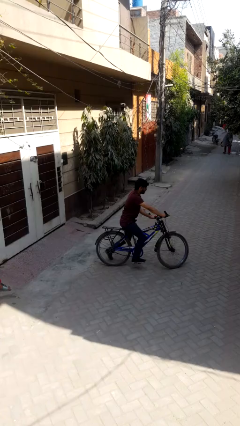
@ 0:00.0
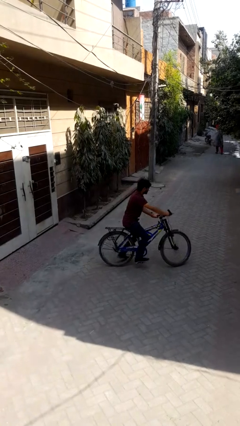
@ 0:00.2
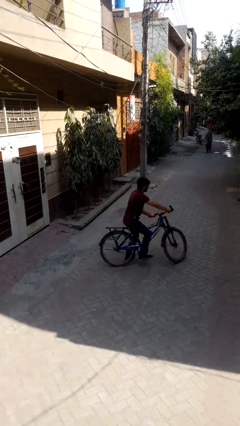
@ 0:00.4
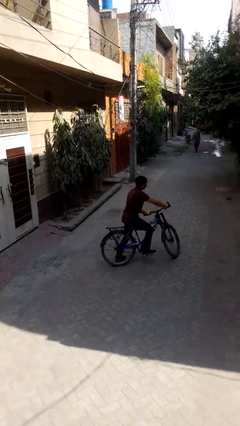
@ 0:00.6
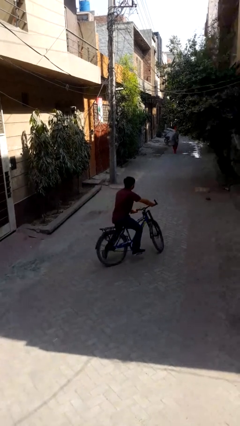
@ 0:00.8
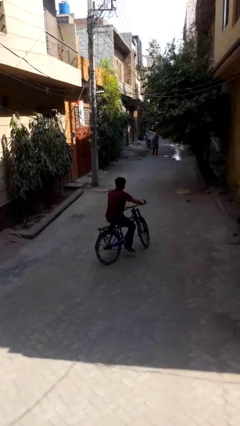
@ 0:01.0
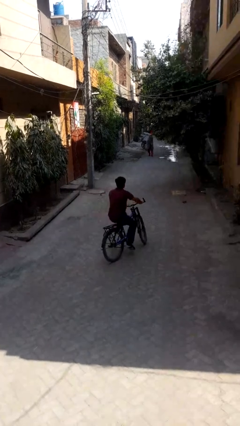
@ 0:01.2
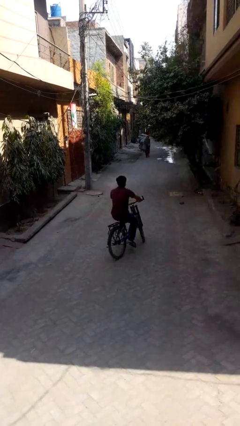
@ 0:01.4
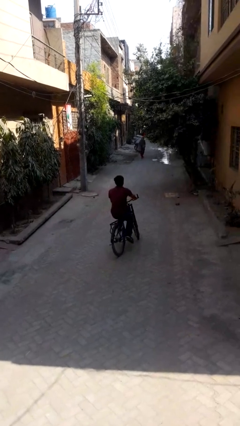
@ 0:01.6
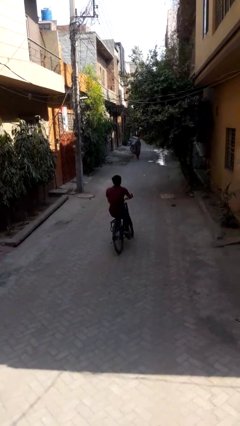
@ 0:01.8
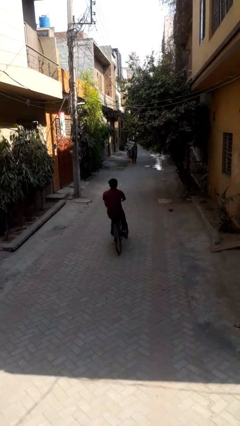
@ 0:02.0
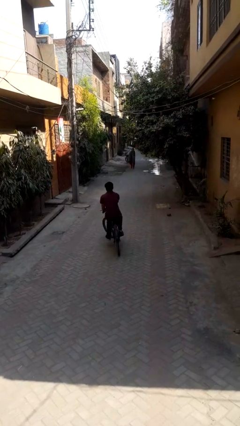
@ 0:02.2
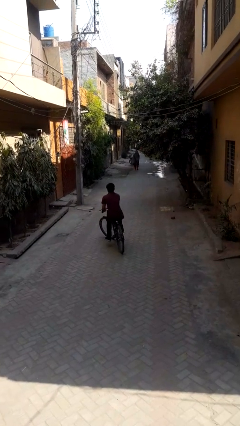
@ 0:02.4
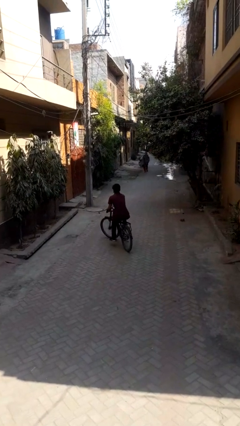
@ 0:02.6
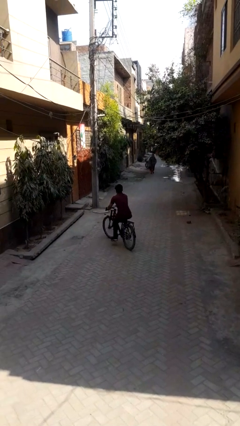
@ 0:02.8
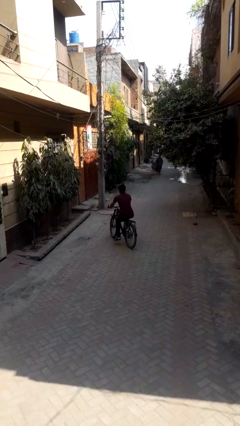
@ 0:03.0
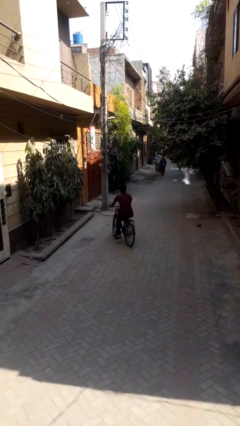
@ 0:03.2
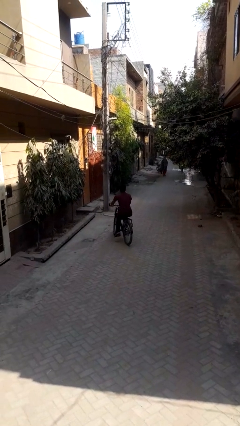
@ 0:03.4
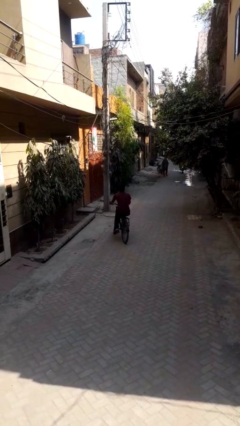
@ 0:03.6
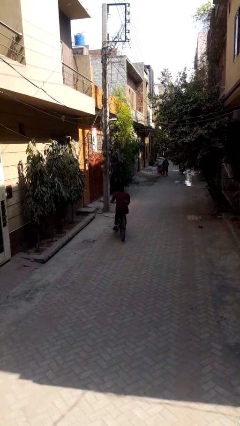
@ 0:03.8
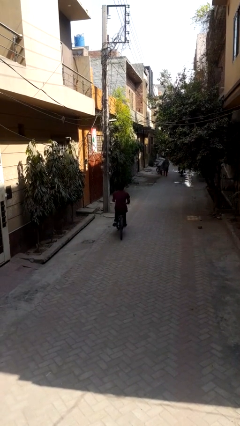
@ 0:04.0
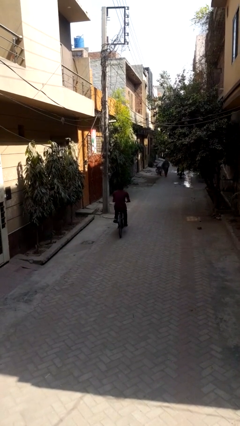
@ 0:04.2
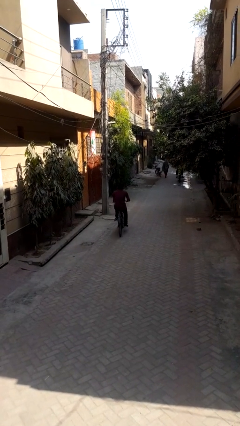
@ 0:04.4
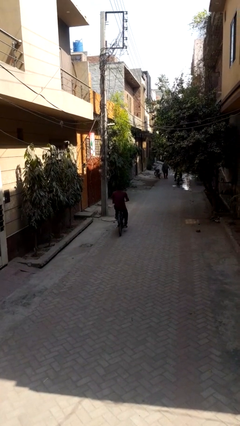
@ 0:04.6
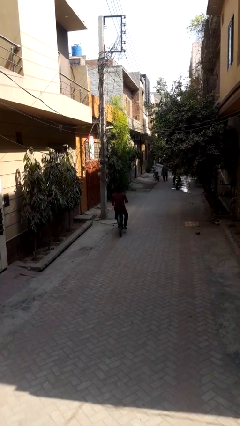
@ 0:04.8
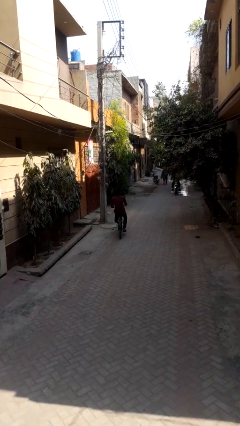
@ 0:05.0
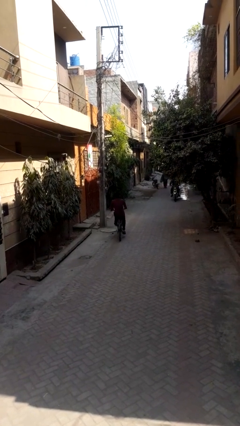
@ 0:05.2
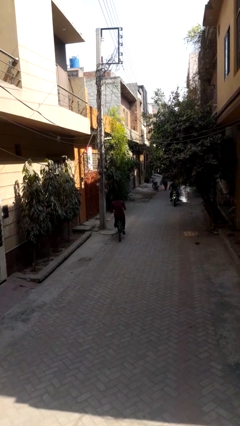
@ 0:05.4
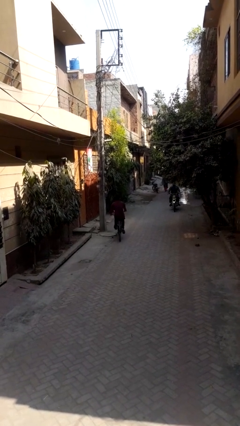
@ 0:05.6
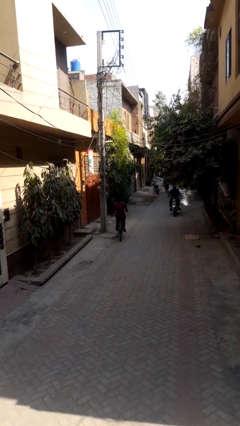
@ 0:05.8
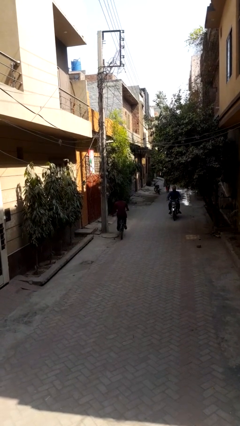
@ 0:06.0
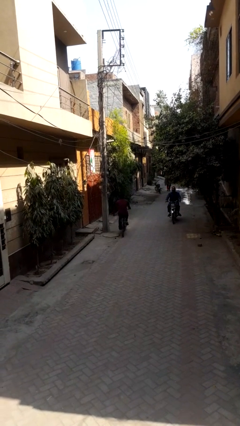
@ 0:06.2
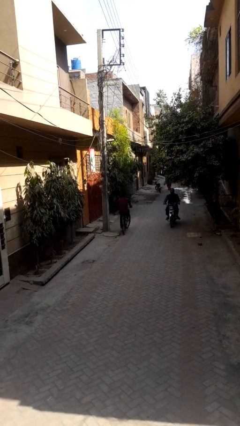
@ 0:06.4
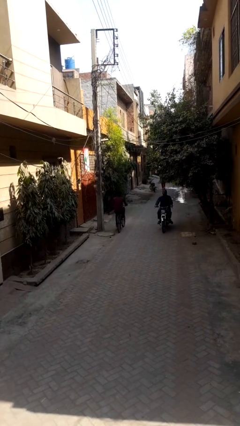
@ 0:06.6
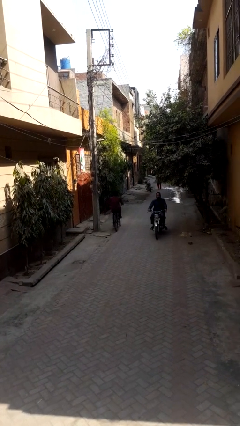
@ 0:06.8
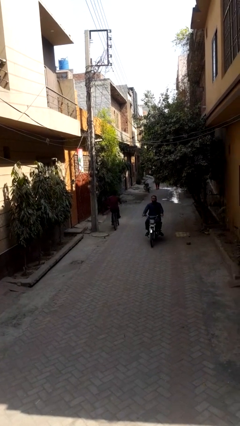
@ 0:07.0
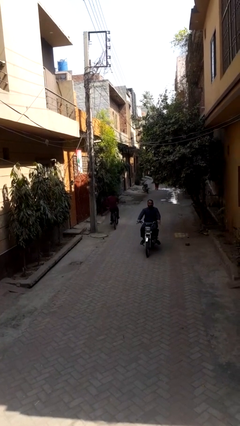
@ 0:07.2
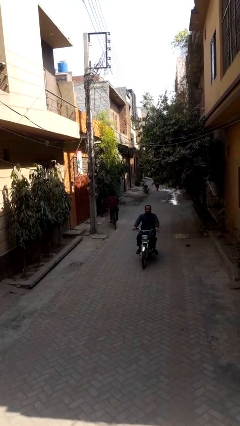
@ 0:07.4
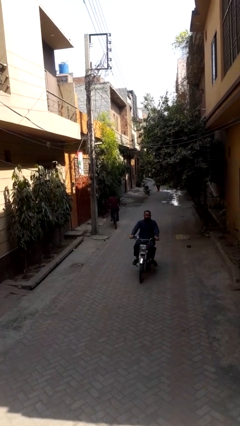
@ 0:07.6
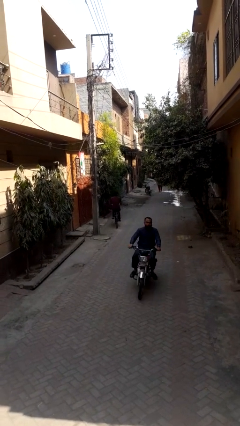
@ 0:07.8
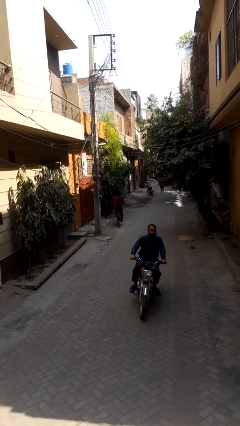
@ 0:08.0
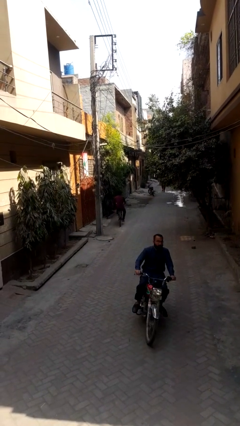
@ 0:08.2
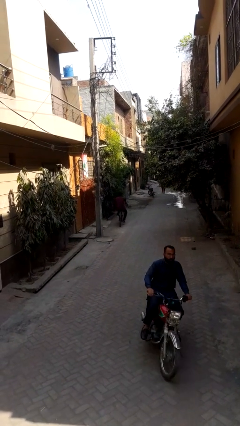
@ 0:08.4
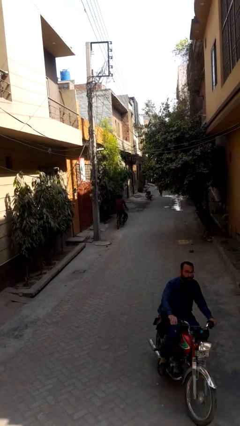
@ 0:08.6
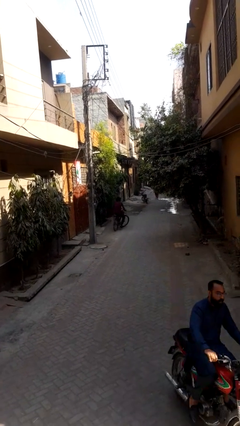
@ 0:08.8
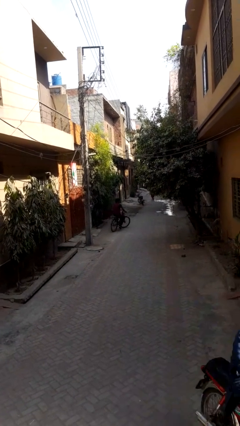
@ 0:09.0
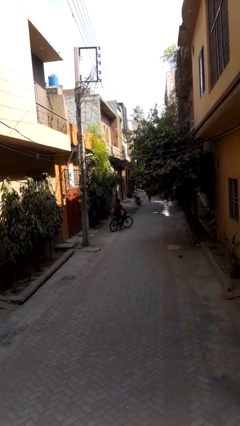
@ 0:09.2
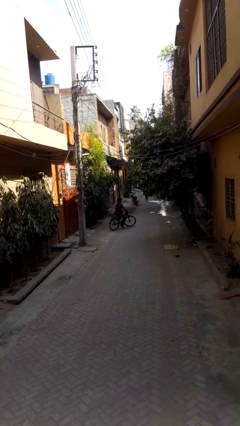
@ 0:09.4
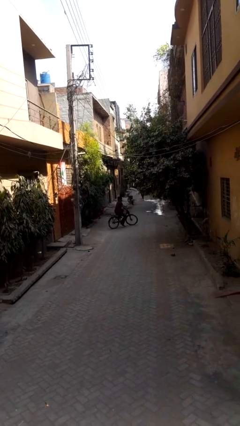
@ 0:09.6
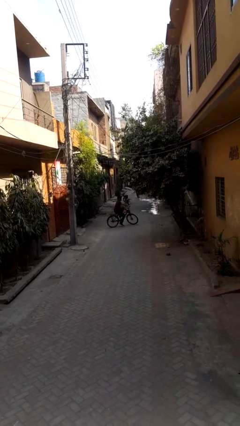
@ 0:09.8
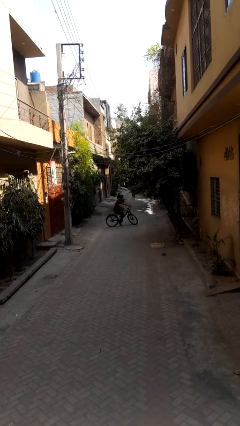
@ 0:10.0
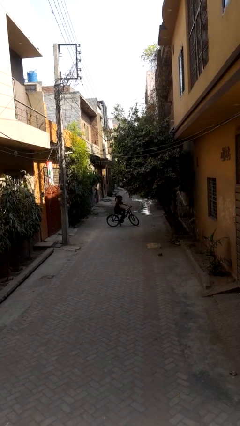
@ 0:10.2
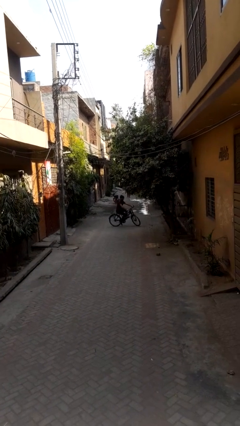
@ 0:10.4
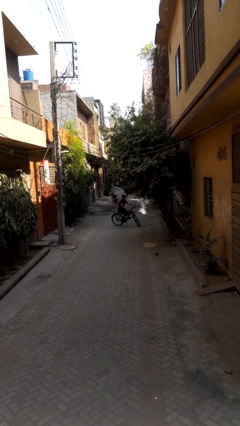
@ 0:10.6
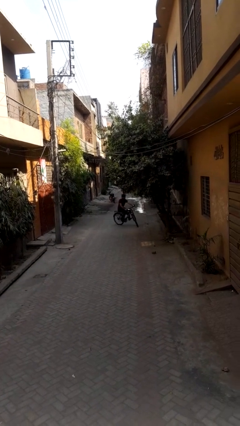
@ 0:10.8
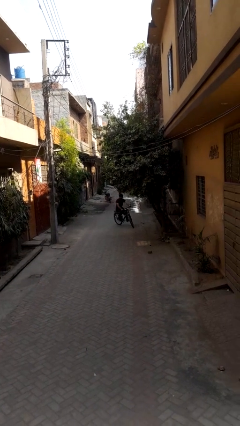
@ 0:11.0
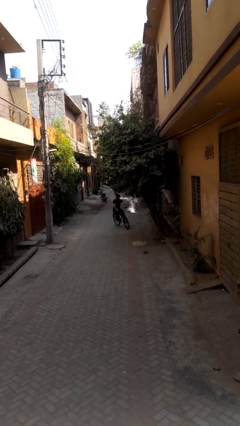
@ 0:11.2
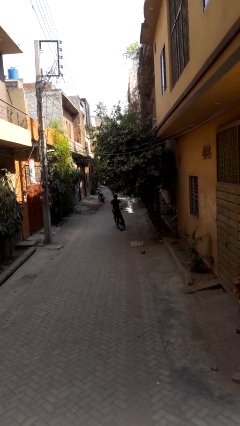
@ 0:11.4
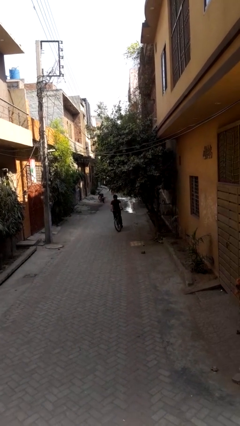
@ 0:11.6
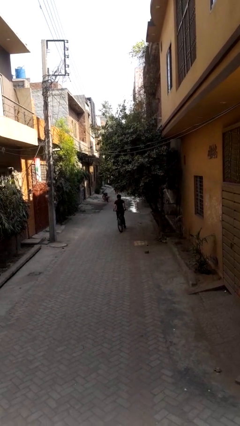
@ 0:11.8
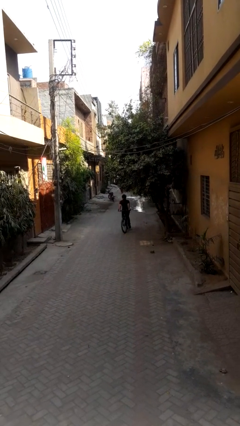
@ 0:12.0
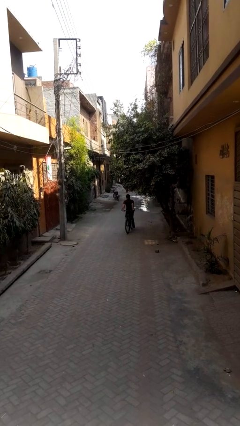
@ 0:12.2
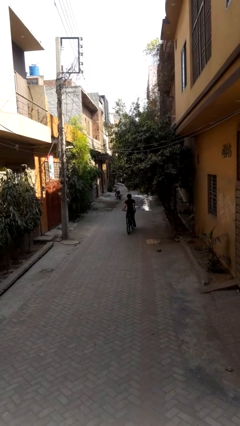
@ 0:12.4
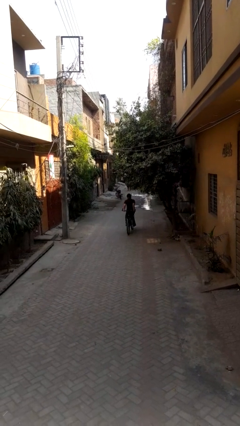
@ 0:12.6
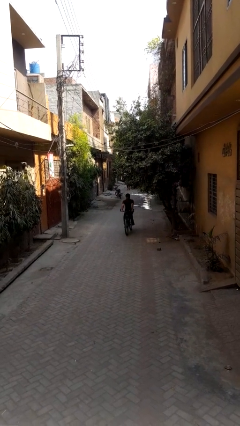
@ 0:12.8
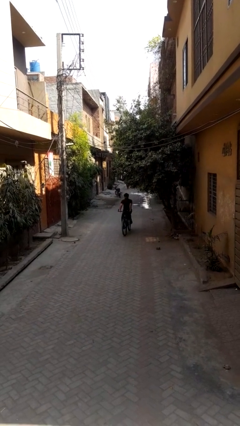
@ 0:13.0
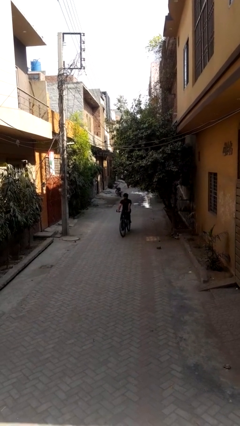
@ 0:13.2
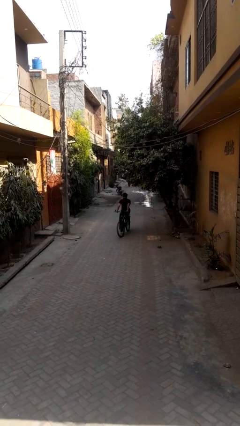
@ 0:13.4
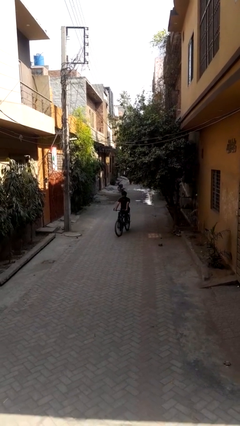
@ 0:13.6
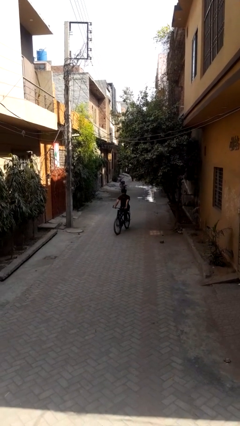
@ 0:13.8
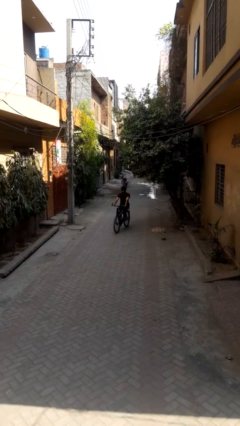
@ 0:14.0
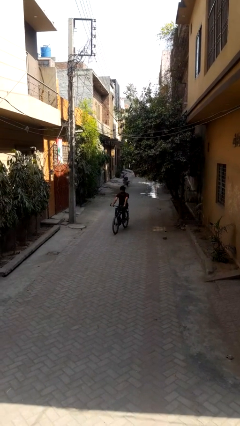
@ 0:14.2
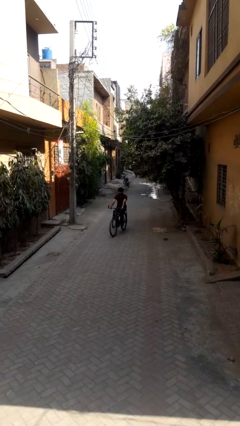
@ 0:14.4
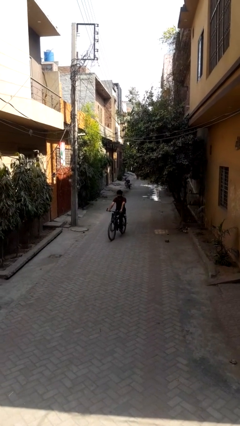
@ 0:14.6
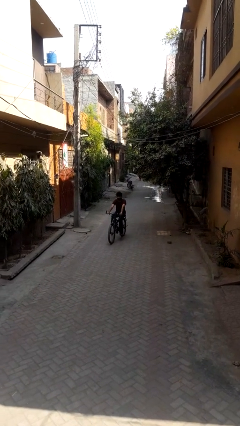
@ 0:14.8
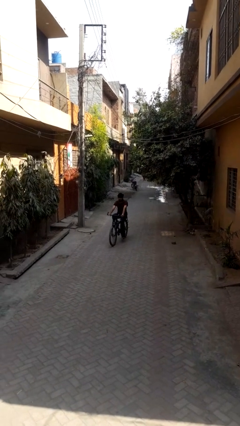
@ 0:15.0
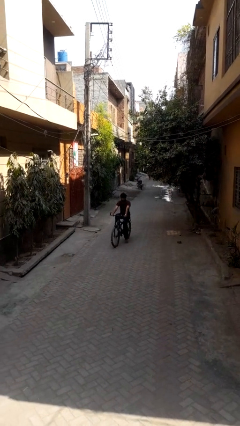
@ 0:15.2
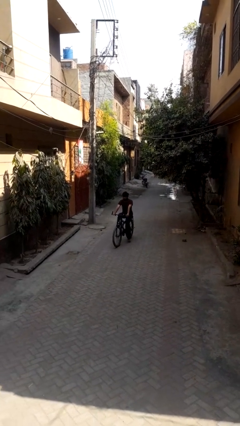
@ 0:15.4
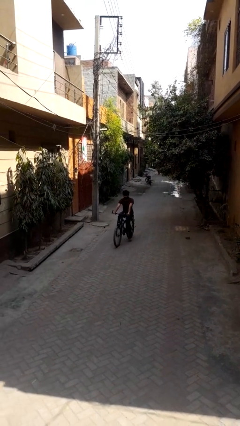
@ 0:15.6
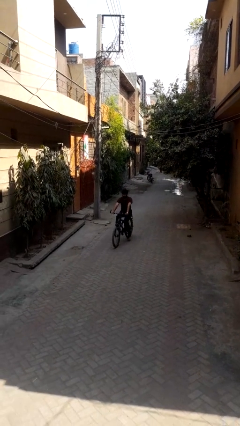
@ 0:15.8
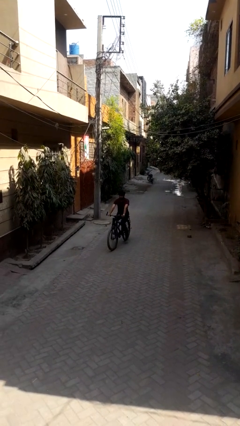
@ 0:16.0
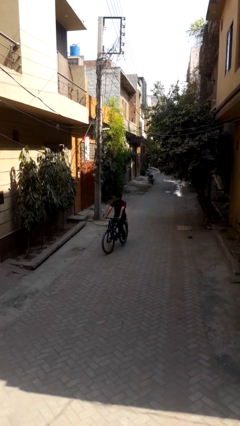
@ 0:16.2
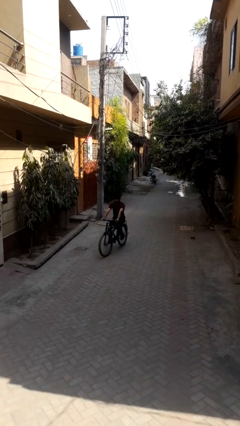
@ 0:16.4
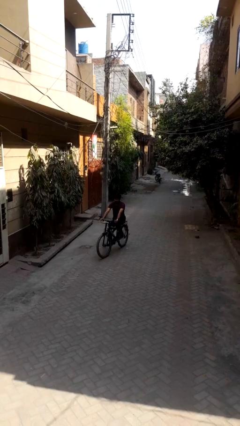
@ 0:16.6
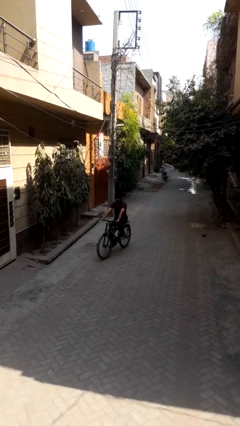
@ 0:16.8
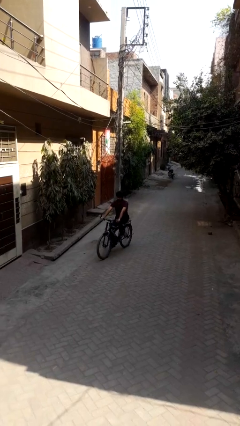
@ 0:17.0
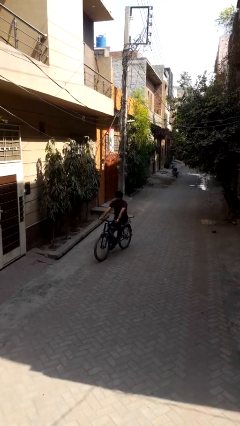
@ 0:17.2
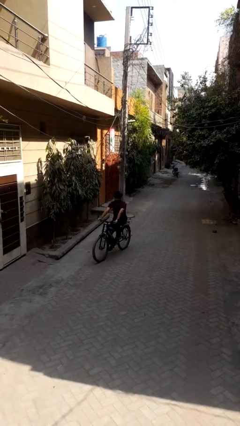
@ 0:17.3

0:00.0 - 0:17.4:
person rides bicycle

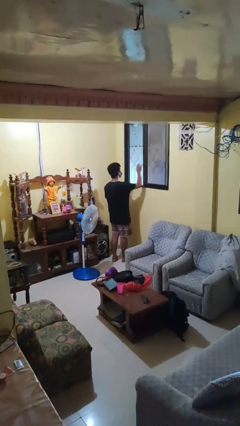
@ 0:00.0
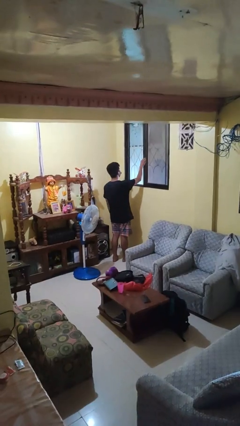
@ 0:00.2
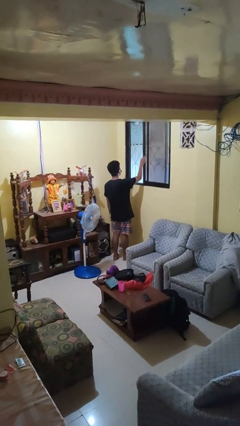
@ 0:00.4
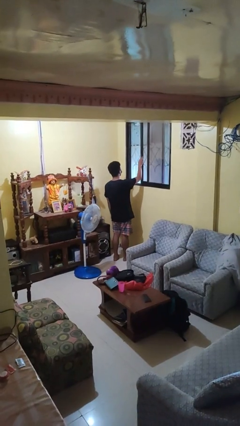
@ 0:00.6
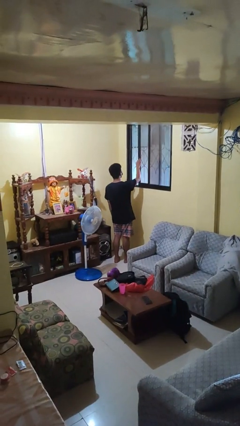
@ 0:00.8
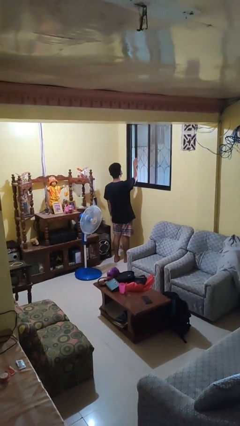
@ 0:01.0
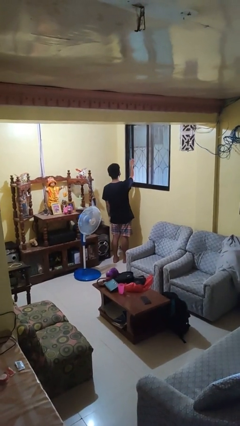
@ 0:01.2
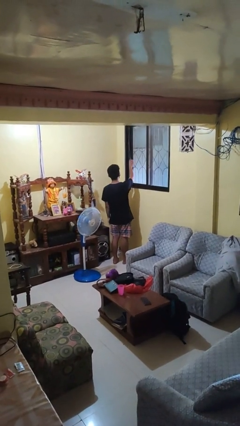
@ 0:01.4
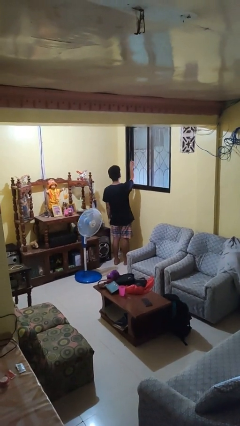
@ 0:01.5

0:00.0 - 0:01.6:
person closes home window
